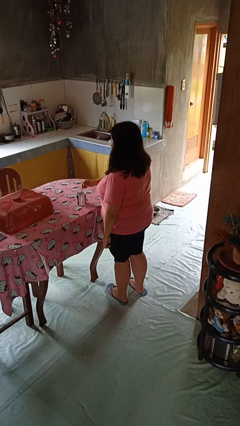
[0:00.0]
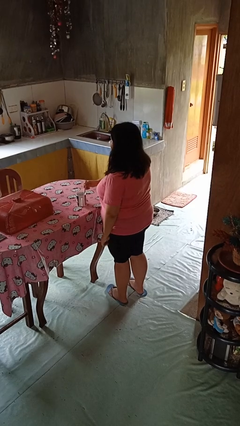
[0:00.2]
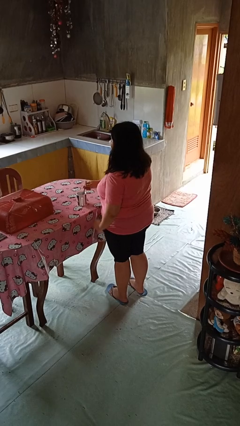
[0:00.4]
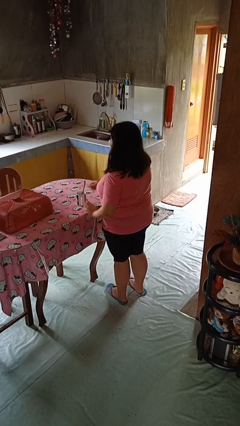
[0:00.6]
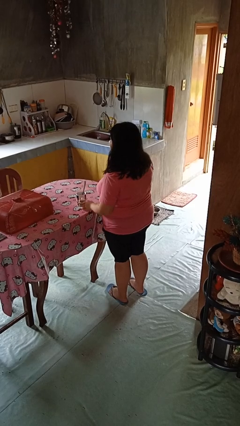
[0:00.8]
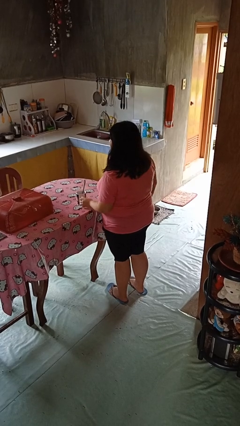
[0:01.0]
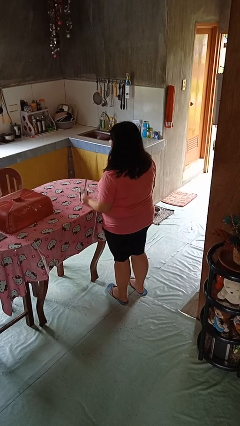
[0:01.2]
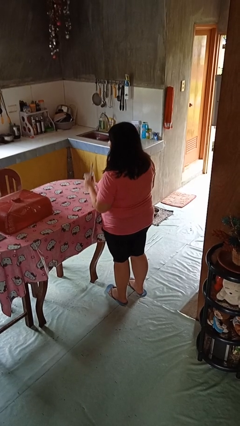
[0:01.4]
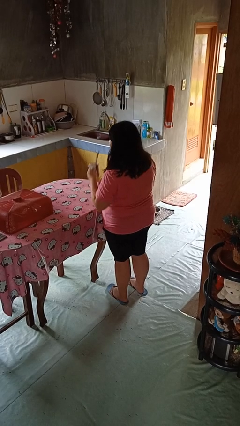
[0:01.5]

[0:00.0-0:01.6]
person stirs mug

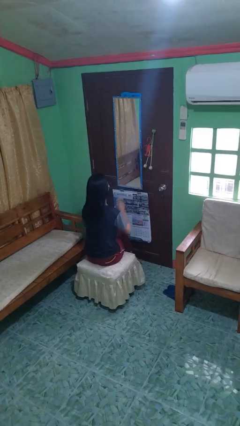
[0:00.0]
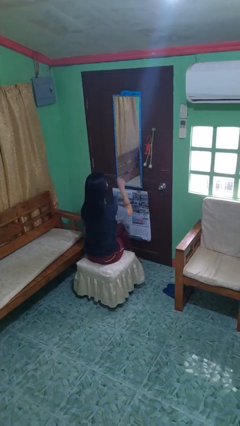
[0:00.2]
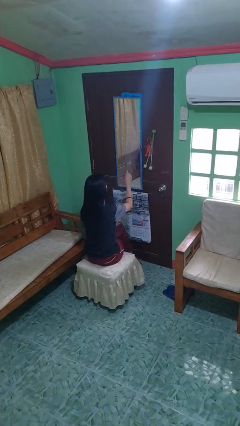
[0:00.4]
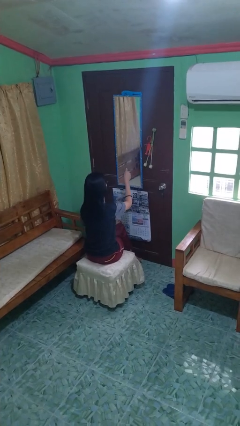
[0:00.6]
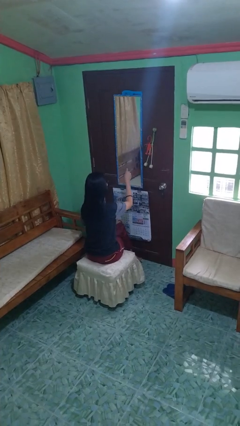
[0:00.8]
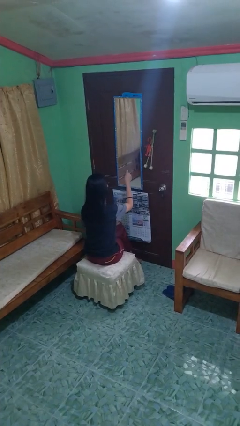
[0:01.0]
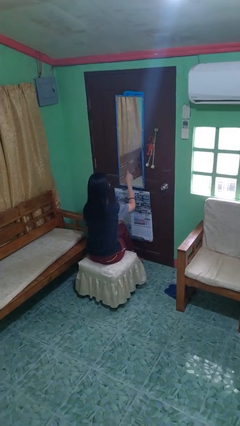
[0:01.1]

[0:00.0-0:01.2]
person gestures thumbs up

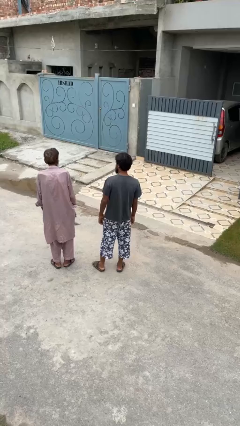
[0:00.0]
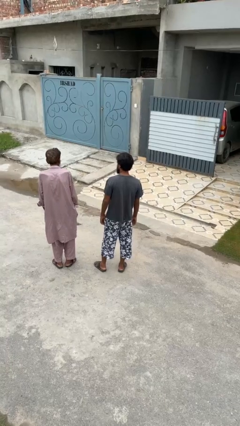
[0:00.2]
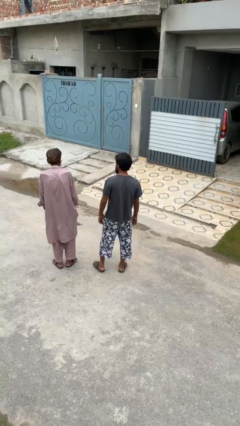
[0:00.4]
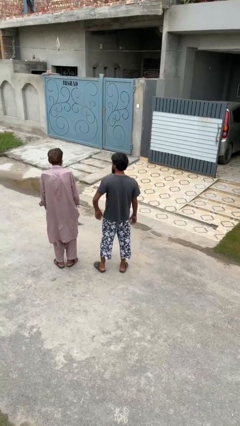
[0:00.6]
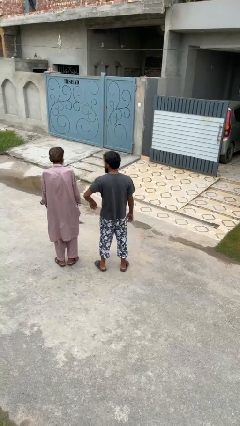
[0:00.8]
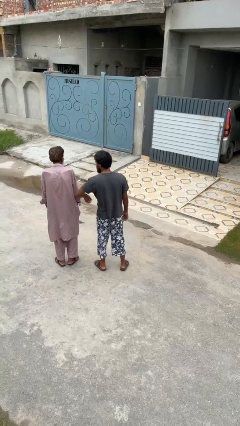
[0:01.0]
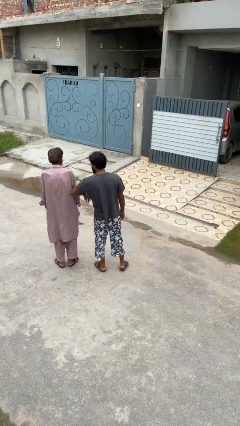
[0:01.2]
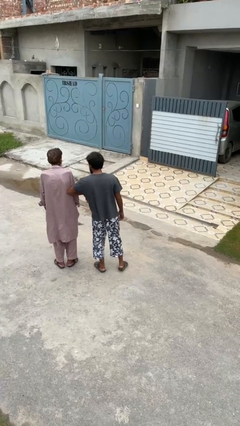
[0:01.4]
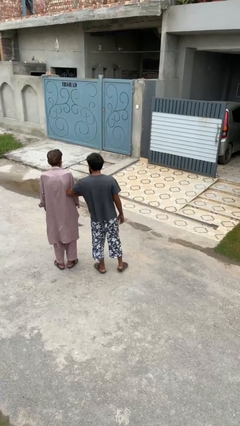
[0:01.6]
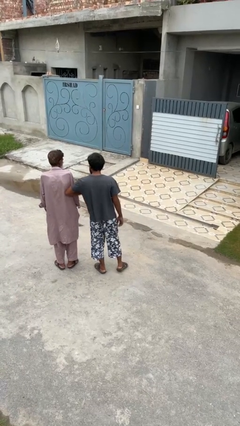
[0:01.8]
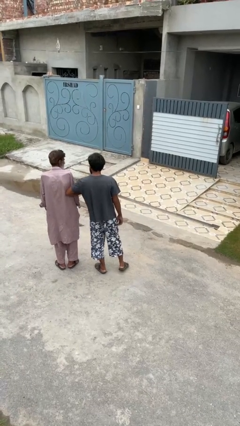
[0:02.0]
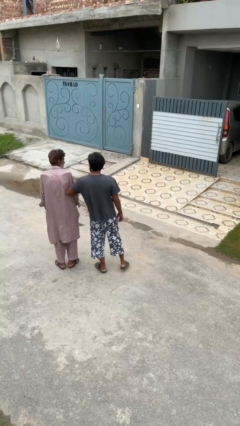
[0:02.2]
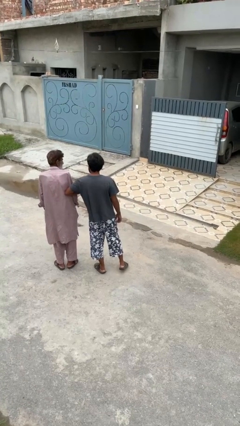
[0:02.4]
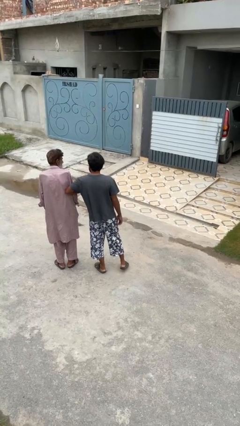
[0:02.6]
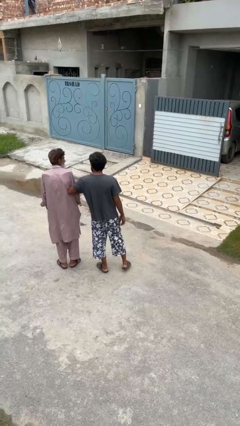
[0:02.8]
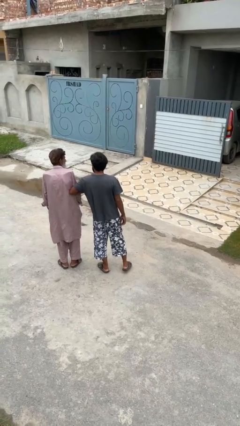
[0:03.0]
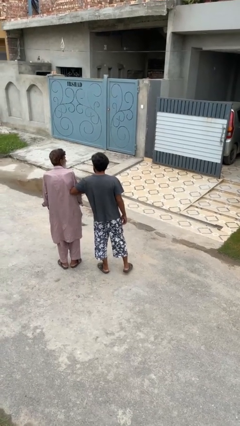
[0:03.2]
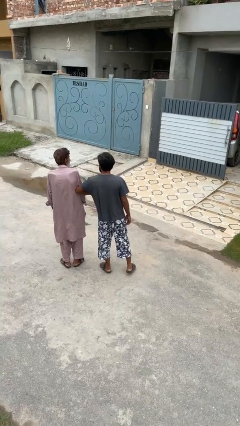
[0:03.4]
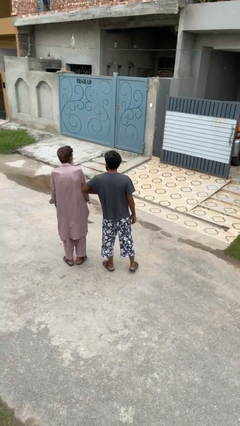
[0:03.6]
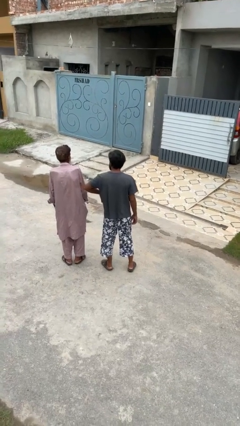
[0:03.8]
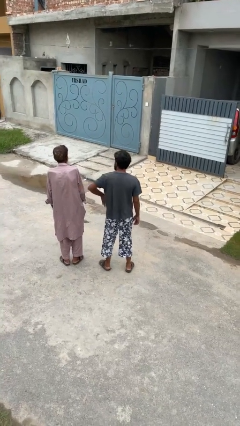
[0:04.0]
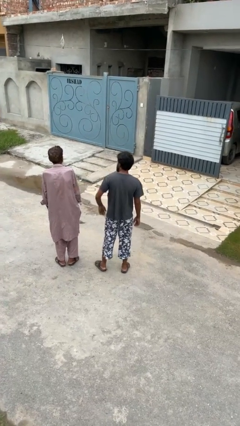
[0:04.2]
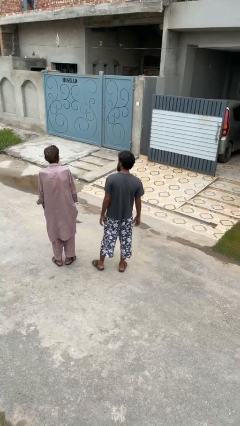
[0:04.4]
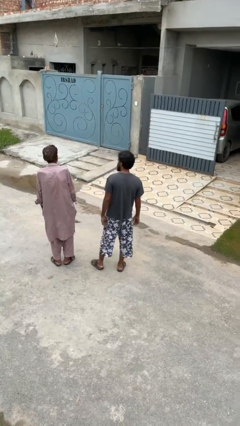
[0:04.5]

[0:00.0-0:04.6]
person nudges person with elbow

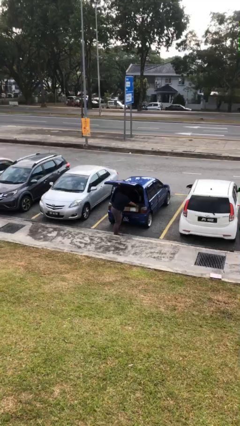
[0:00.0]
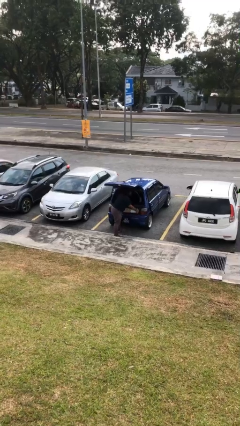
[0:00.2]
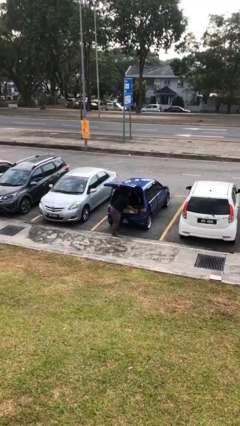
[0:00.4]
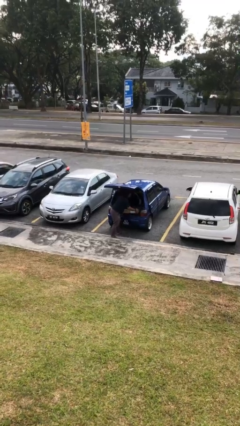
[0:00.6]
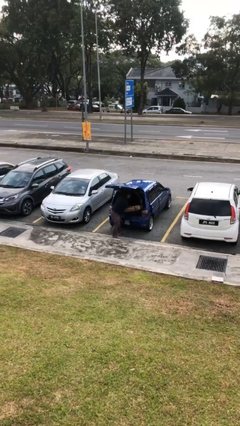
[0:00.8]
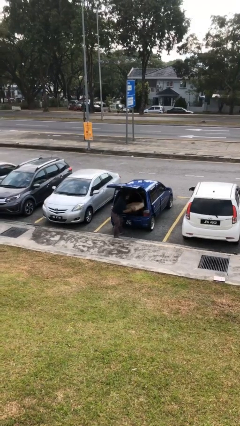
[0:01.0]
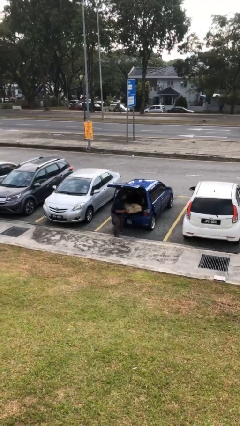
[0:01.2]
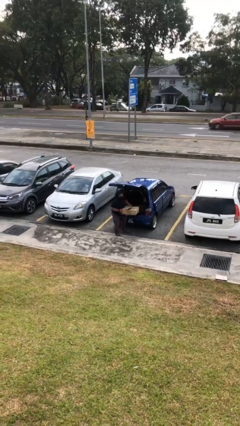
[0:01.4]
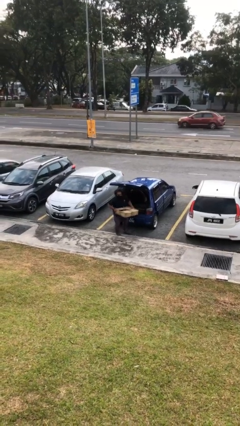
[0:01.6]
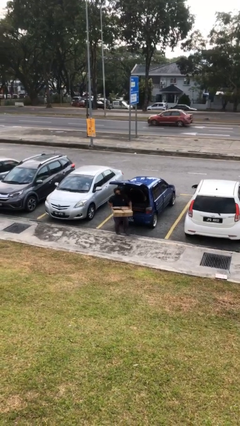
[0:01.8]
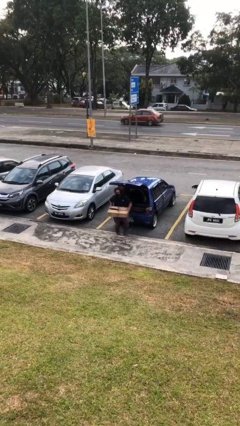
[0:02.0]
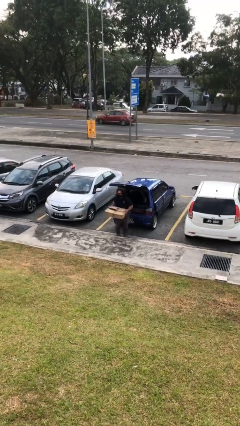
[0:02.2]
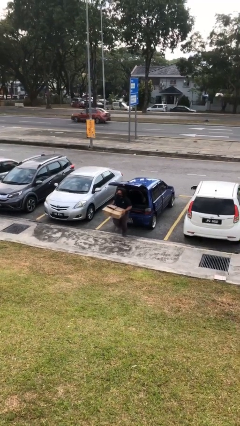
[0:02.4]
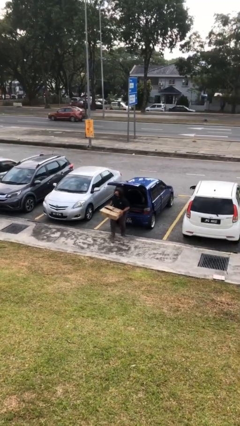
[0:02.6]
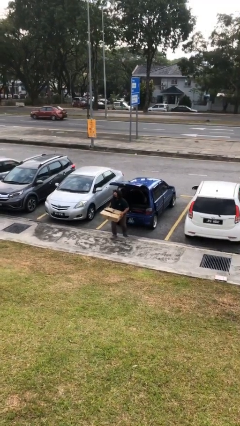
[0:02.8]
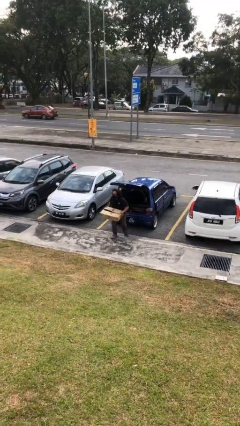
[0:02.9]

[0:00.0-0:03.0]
person unloads car

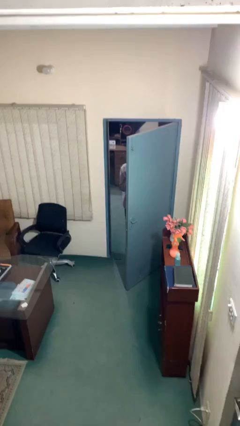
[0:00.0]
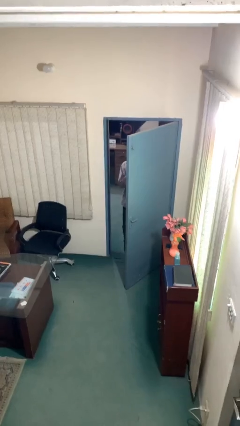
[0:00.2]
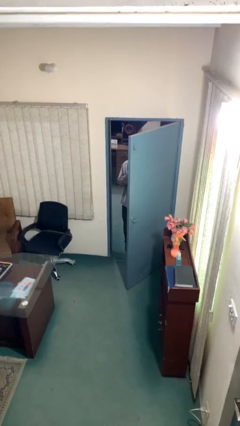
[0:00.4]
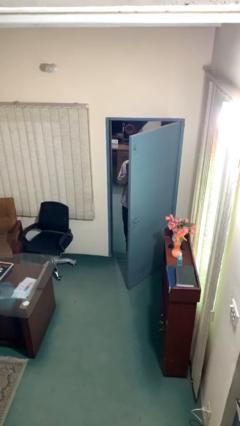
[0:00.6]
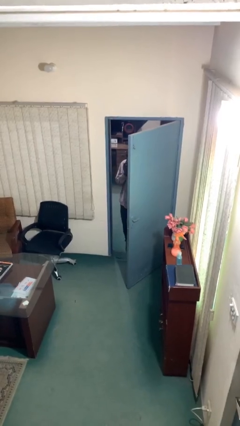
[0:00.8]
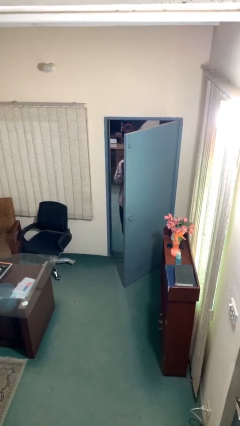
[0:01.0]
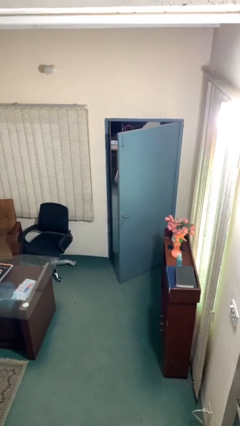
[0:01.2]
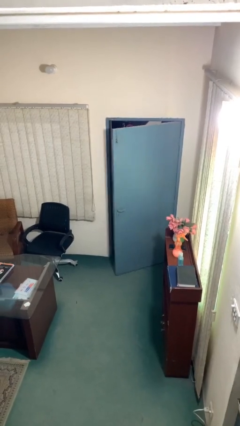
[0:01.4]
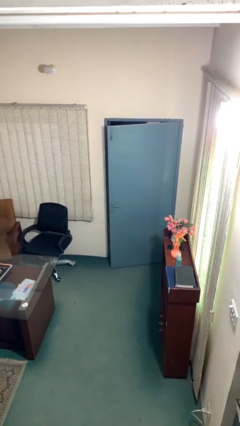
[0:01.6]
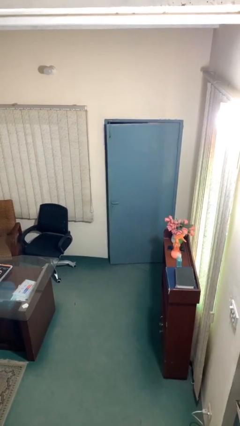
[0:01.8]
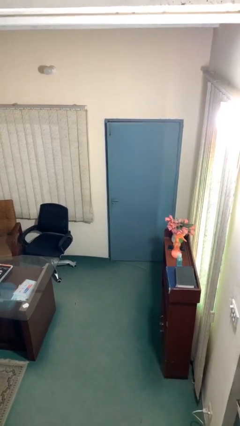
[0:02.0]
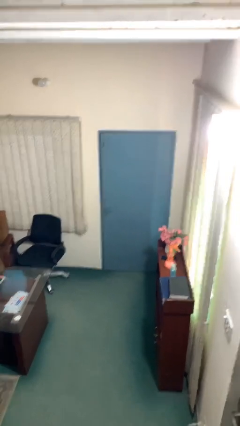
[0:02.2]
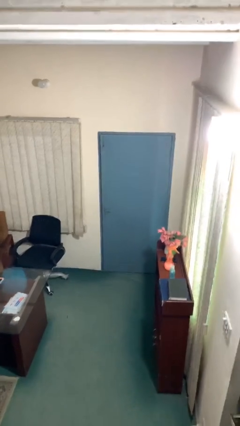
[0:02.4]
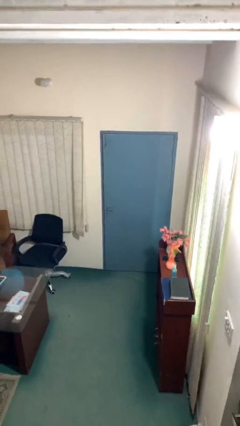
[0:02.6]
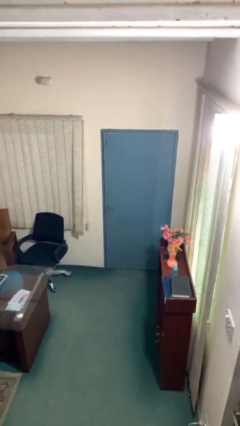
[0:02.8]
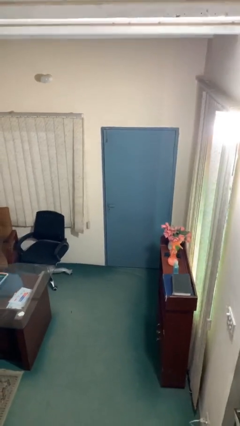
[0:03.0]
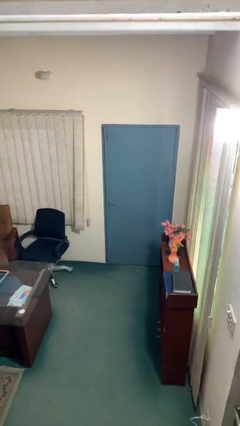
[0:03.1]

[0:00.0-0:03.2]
person closes facility door

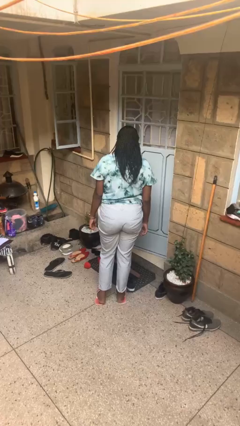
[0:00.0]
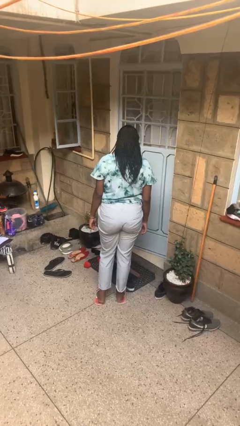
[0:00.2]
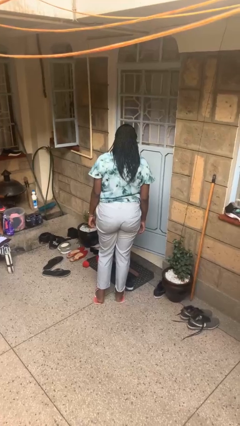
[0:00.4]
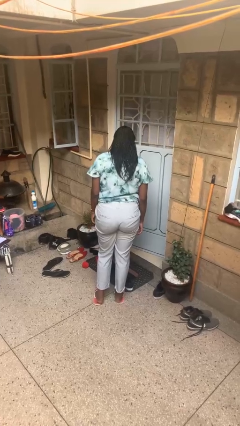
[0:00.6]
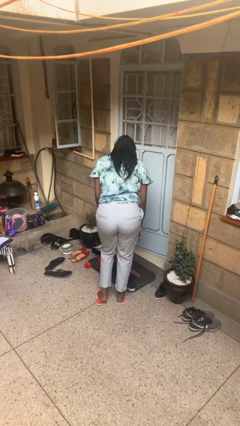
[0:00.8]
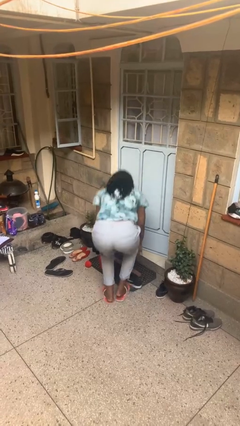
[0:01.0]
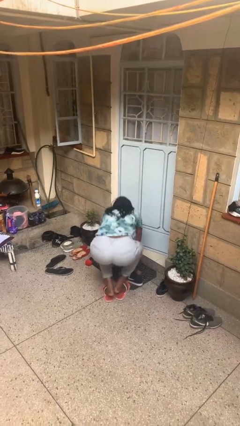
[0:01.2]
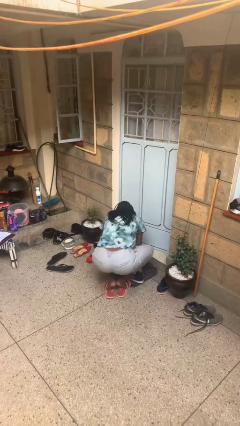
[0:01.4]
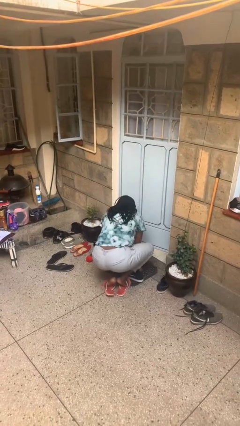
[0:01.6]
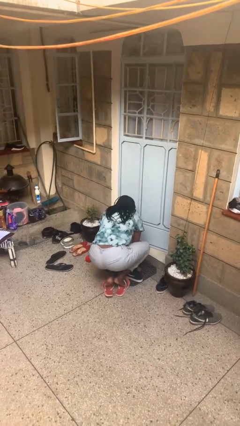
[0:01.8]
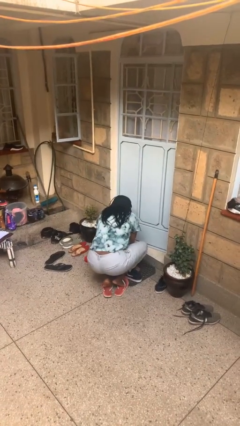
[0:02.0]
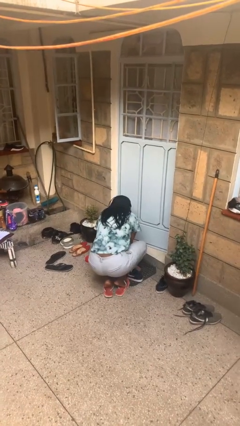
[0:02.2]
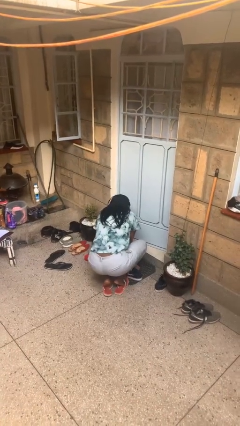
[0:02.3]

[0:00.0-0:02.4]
person trips on object on floor

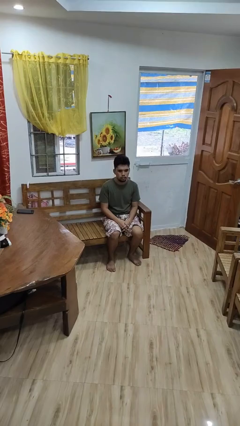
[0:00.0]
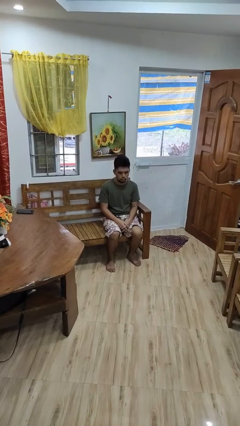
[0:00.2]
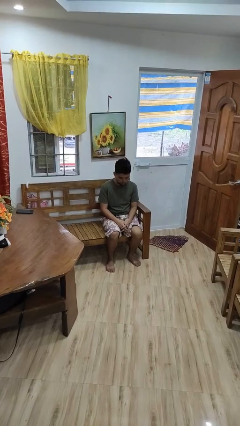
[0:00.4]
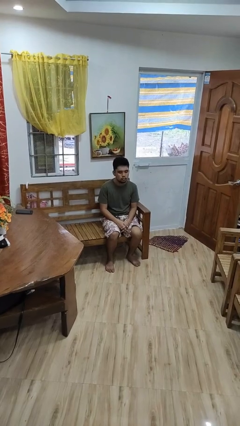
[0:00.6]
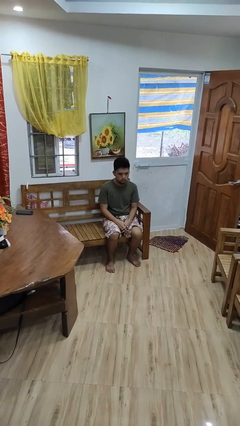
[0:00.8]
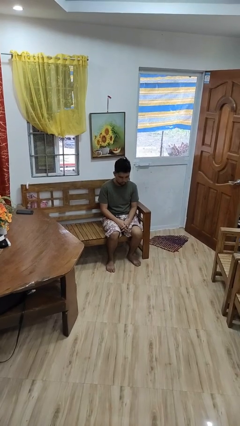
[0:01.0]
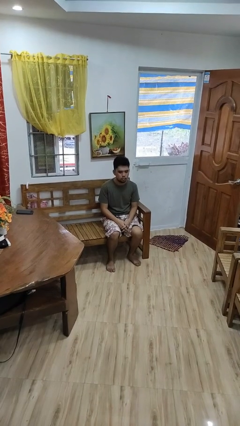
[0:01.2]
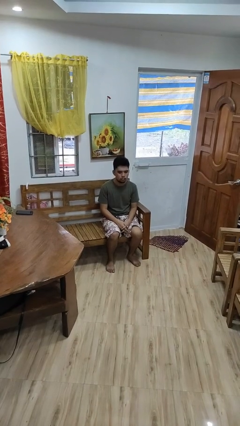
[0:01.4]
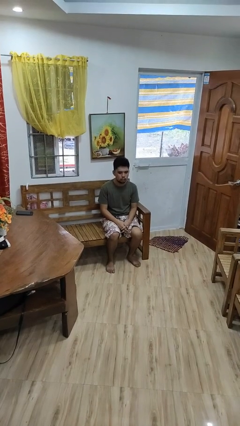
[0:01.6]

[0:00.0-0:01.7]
person nods head
